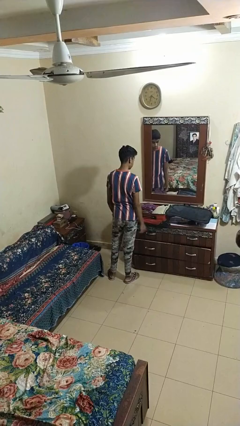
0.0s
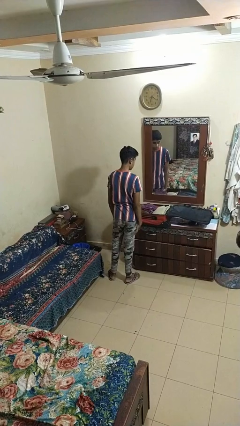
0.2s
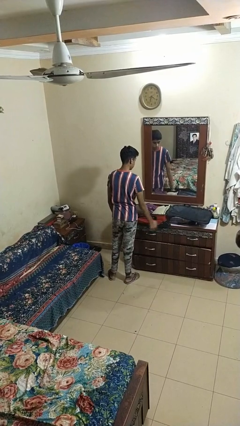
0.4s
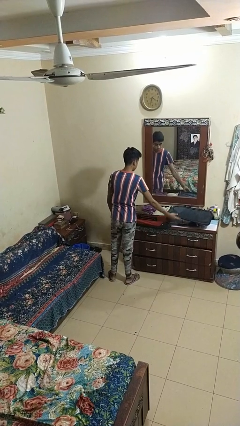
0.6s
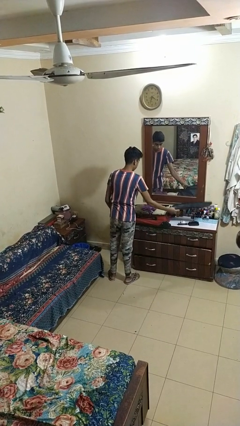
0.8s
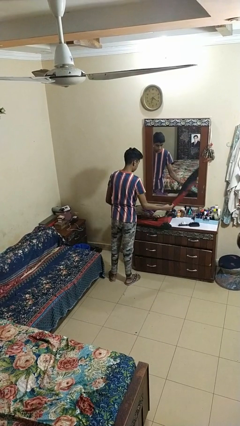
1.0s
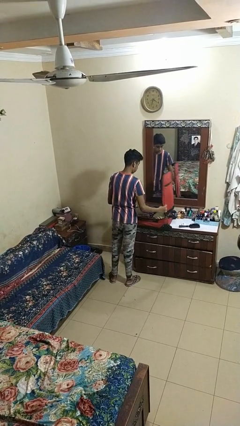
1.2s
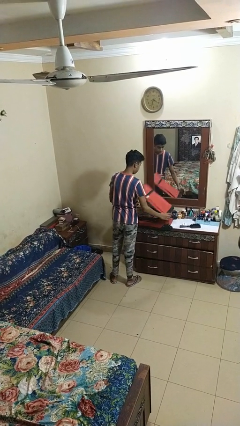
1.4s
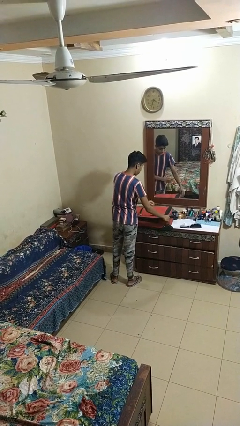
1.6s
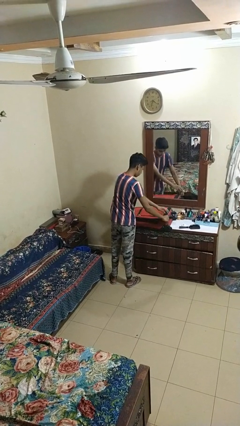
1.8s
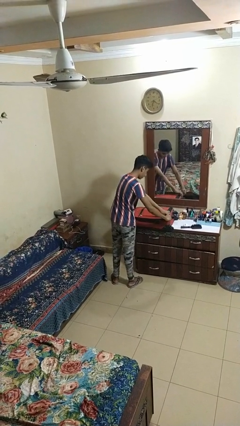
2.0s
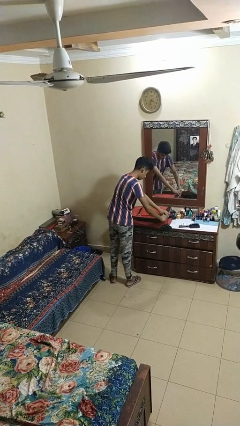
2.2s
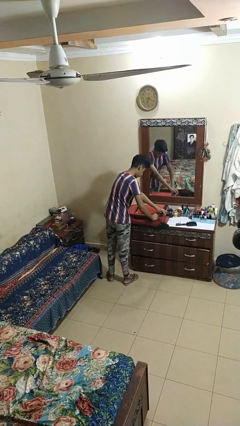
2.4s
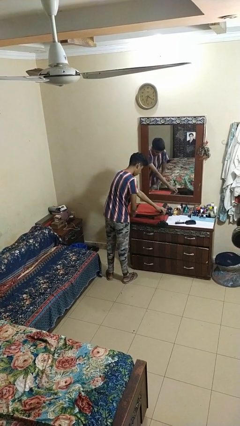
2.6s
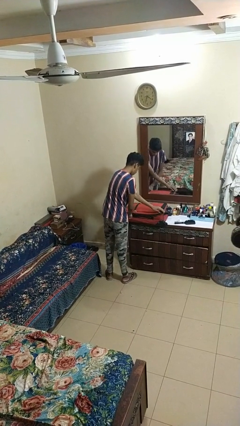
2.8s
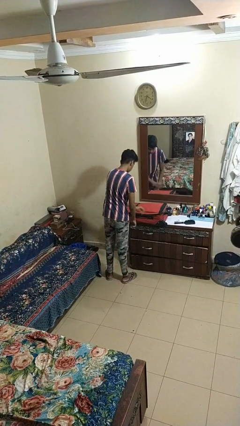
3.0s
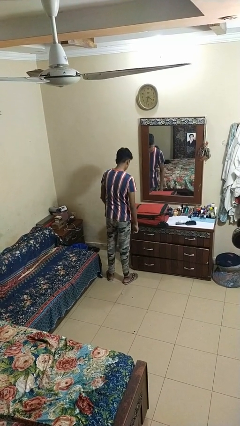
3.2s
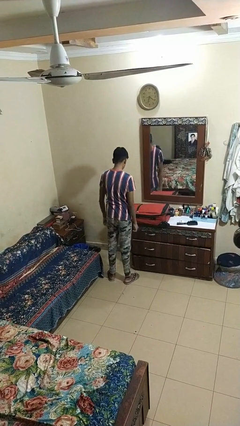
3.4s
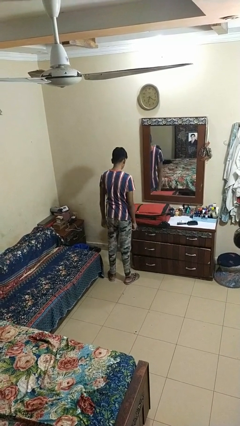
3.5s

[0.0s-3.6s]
person closes suitcase

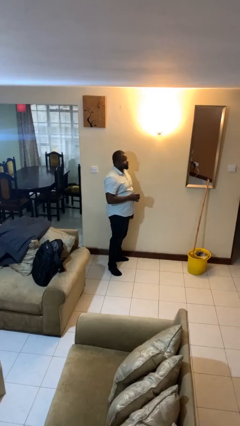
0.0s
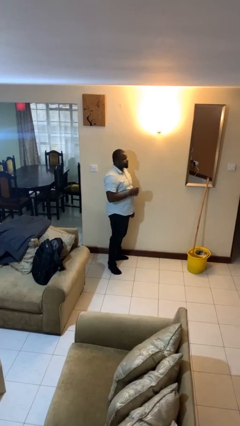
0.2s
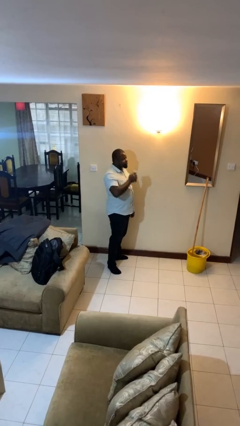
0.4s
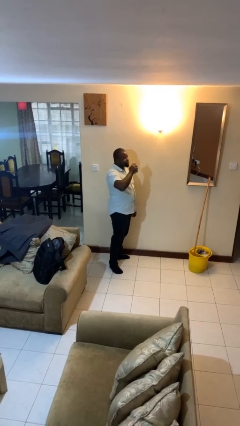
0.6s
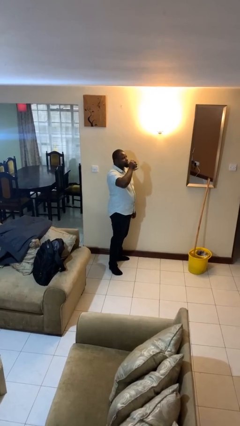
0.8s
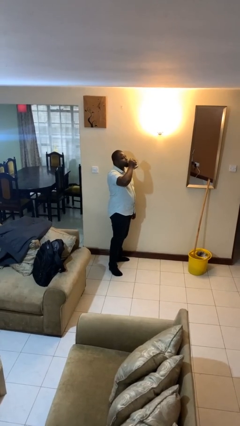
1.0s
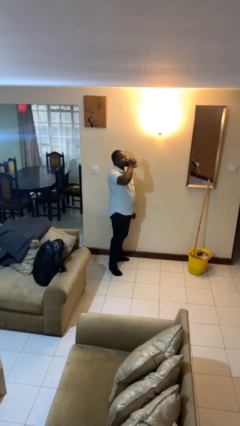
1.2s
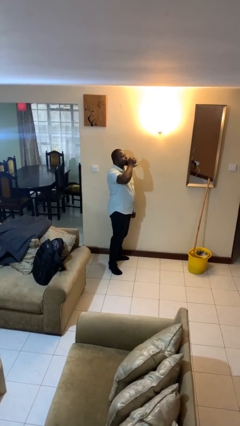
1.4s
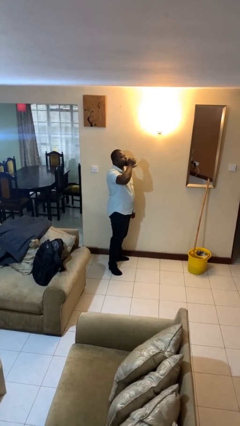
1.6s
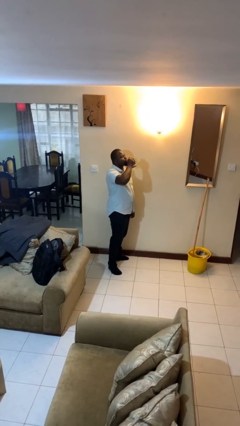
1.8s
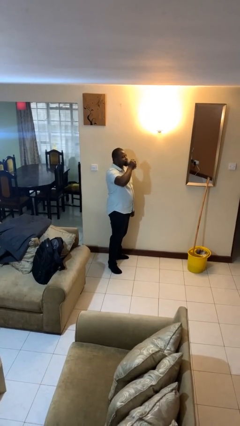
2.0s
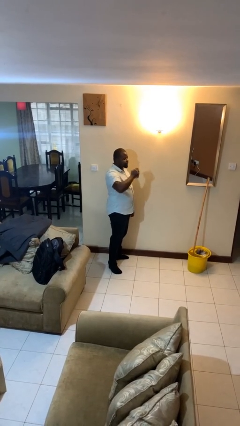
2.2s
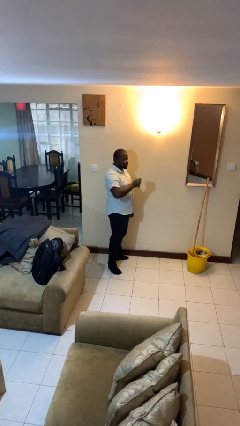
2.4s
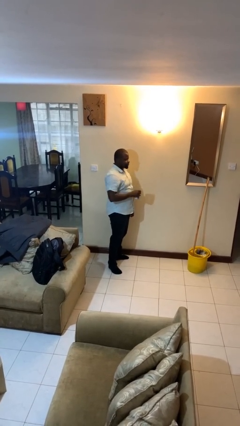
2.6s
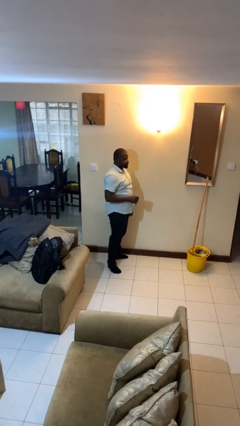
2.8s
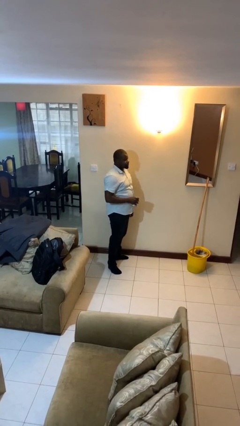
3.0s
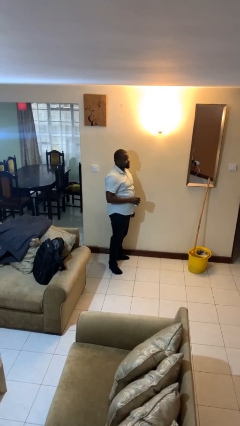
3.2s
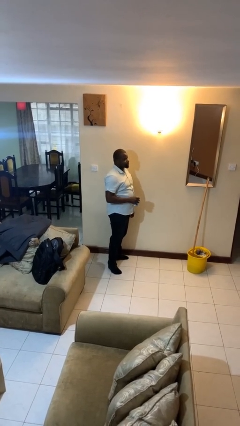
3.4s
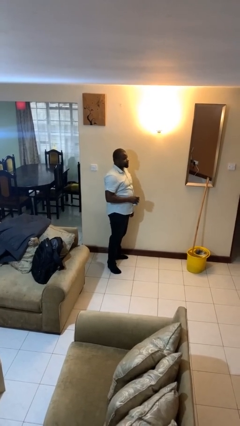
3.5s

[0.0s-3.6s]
person drinks from beverage can

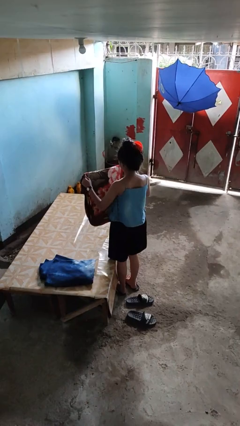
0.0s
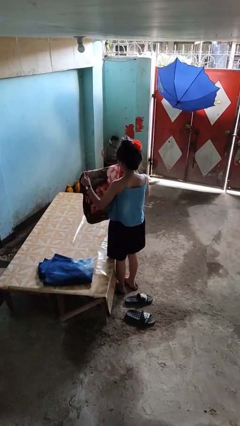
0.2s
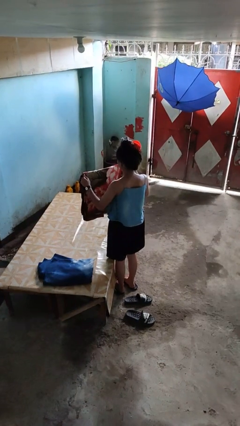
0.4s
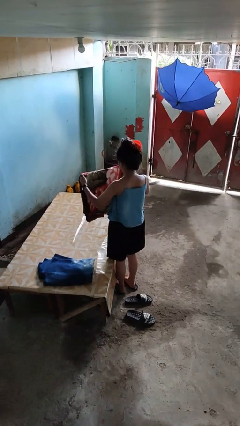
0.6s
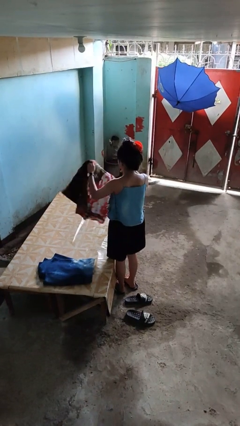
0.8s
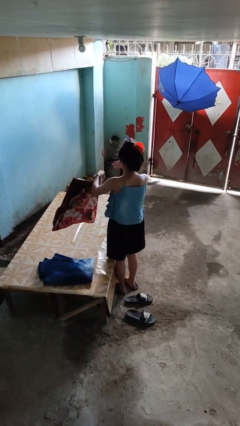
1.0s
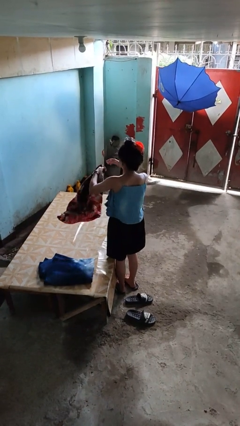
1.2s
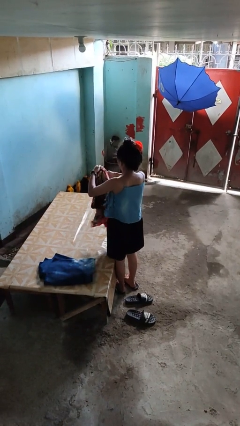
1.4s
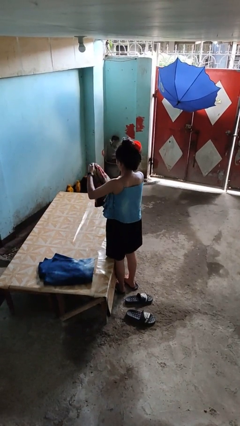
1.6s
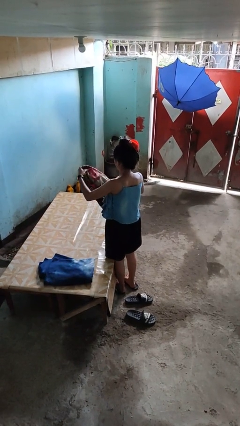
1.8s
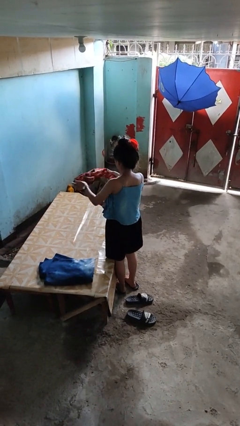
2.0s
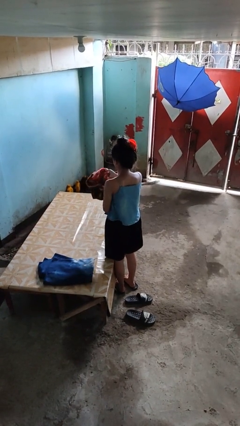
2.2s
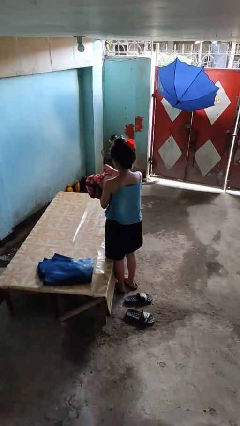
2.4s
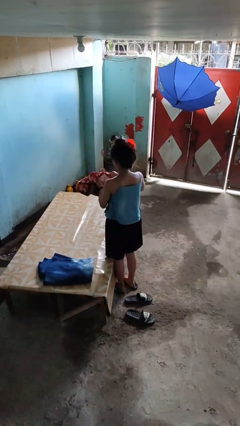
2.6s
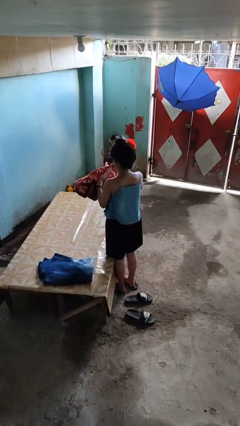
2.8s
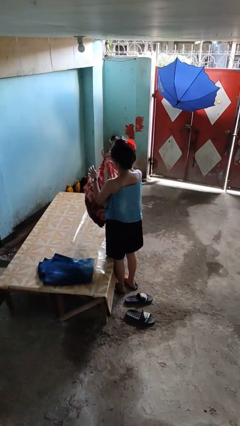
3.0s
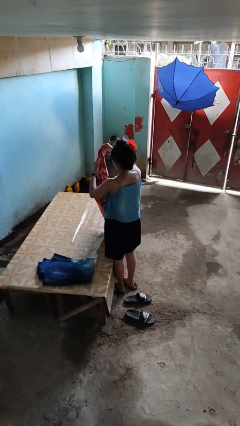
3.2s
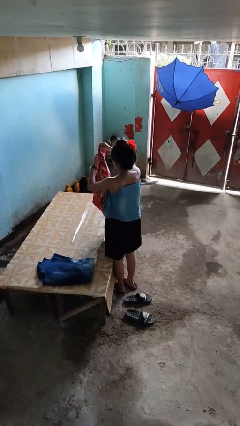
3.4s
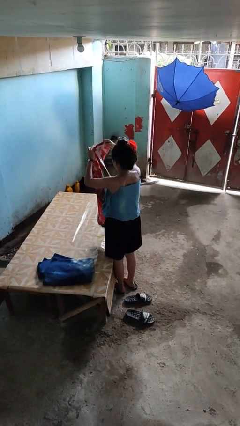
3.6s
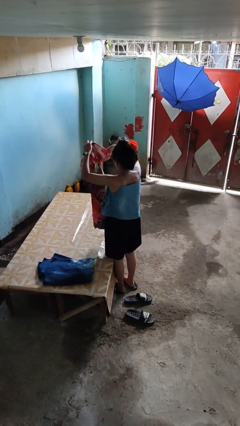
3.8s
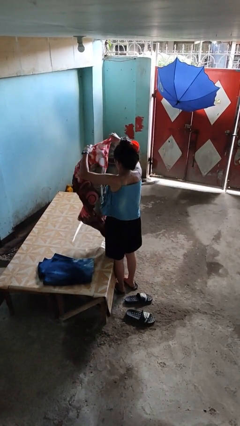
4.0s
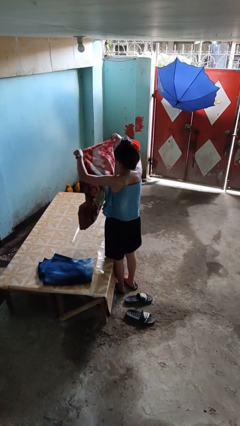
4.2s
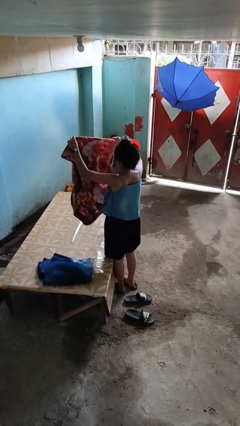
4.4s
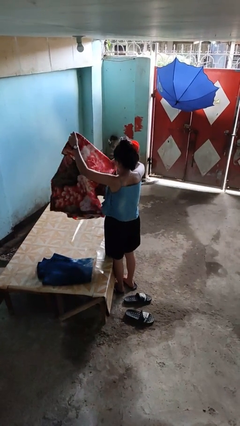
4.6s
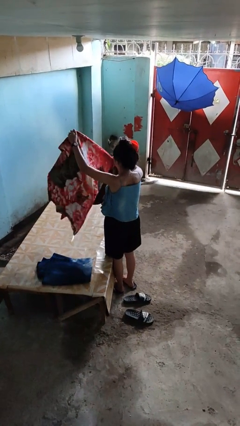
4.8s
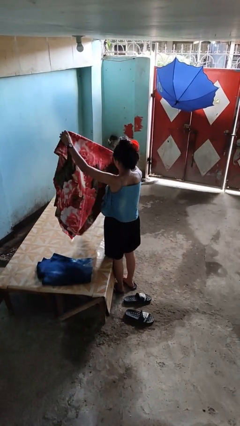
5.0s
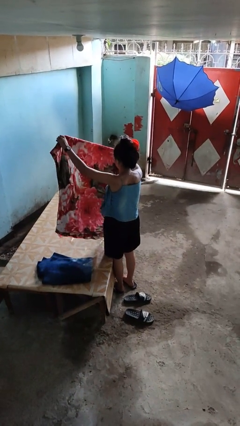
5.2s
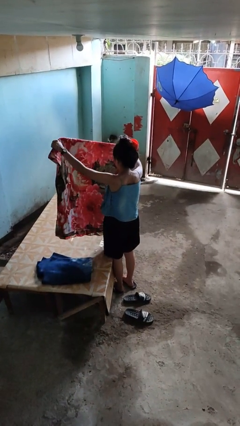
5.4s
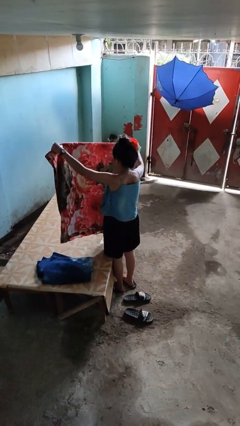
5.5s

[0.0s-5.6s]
person unfolds blanket

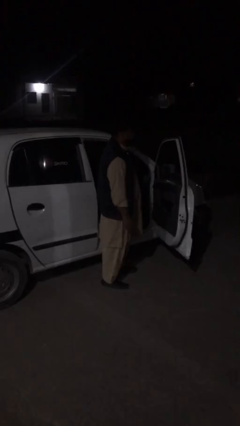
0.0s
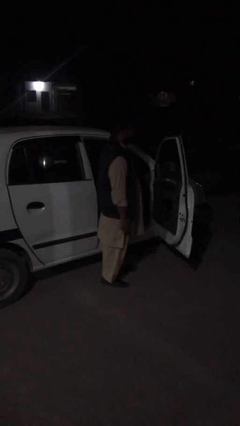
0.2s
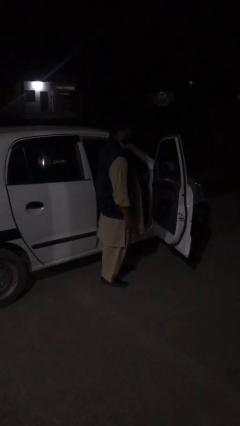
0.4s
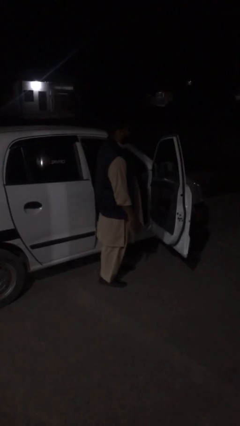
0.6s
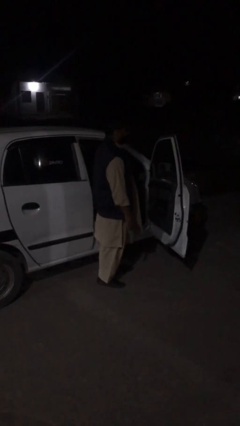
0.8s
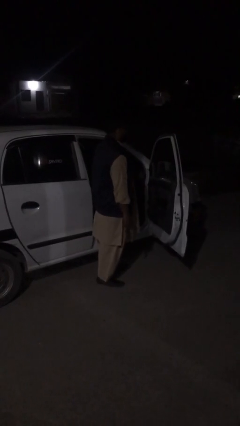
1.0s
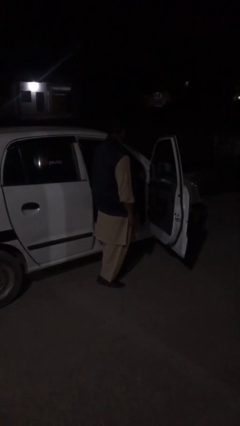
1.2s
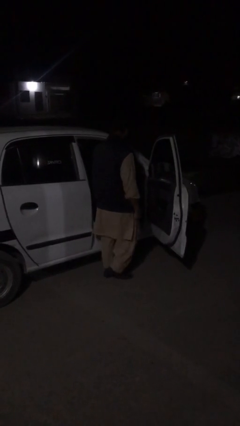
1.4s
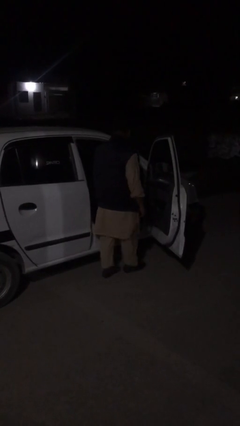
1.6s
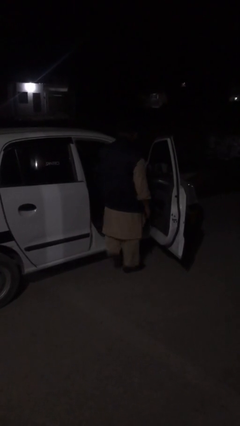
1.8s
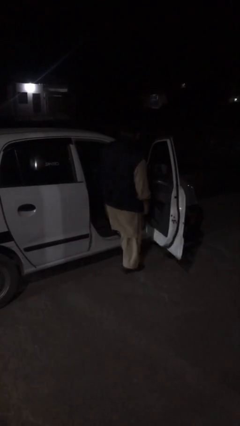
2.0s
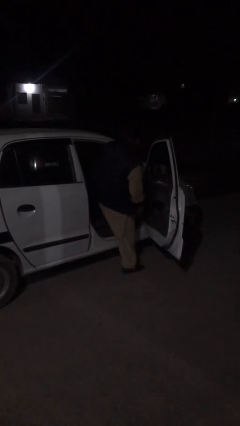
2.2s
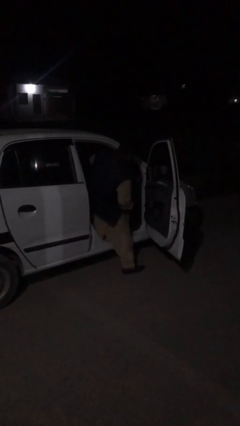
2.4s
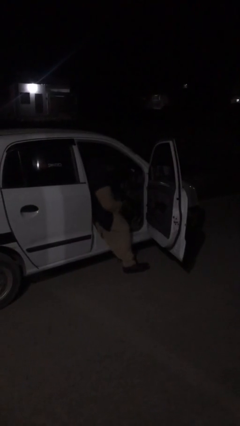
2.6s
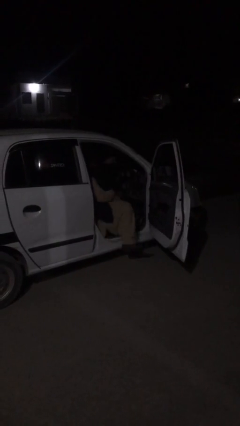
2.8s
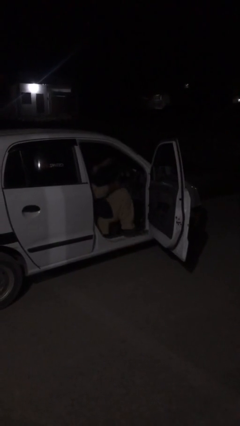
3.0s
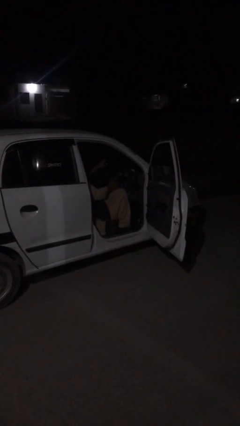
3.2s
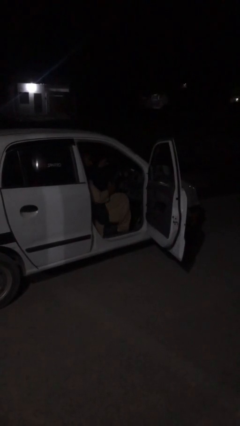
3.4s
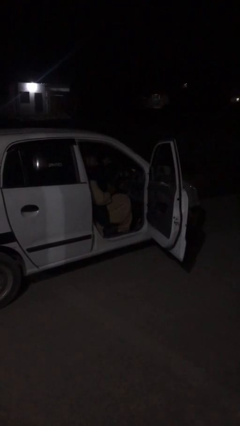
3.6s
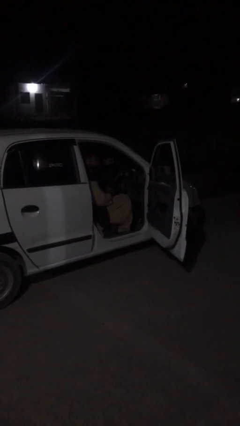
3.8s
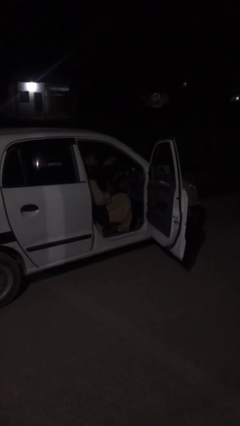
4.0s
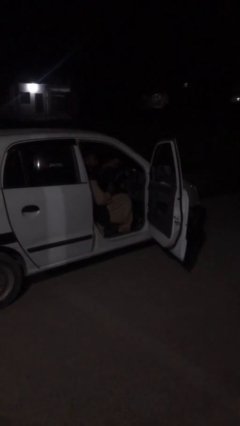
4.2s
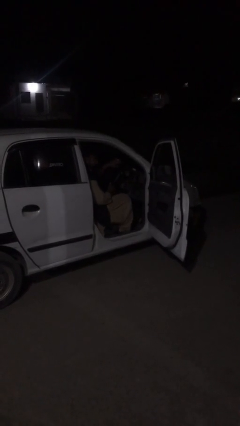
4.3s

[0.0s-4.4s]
person enters car

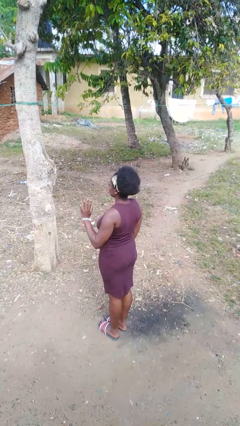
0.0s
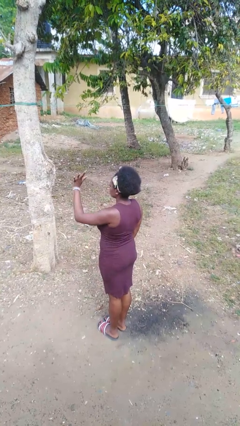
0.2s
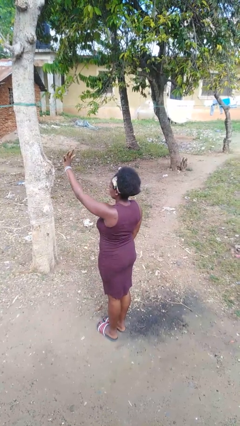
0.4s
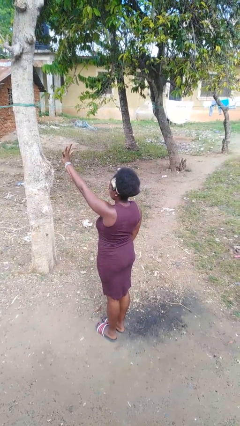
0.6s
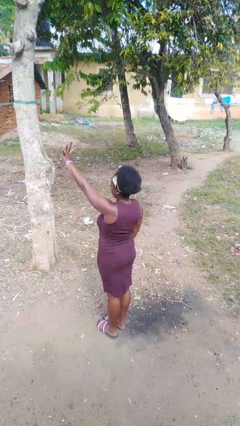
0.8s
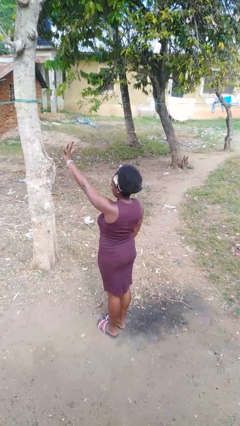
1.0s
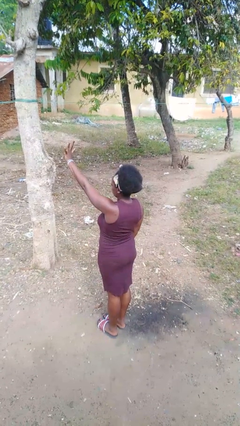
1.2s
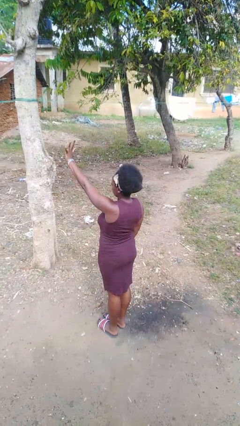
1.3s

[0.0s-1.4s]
person gestures number five
